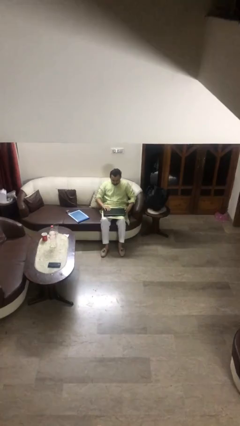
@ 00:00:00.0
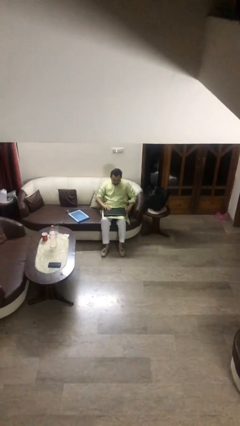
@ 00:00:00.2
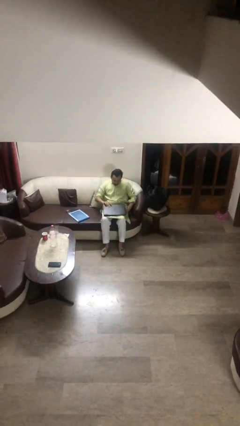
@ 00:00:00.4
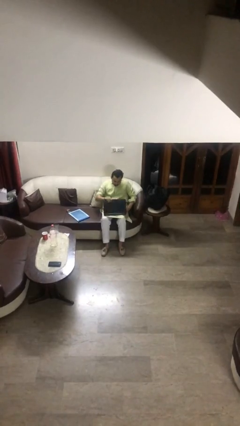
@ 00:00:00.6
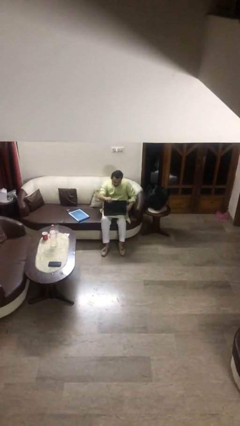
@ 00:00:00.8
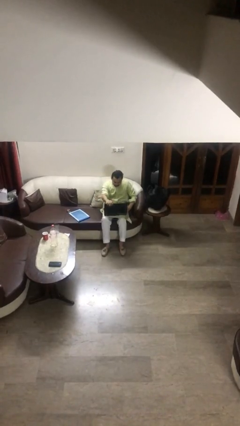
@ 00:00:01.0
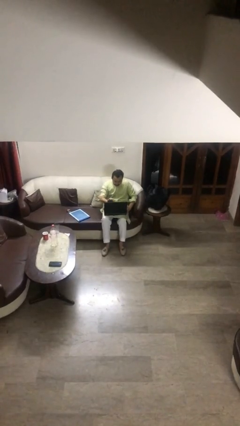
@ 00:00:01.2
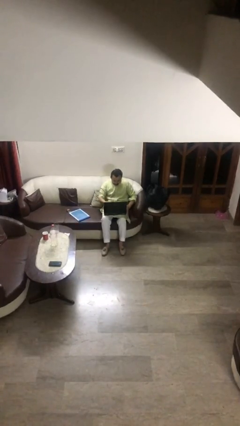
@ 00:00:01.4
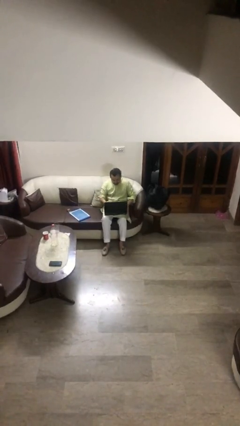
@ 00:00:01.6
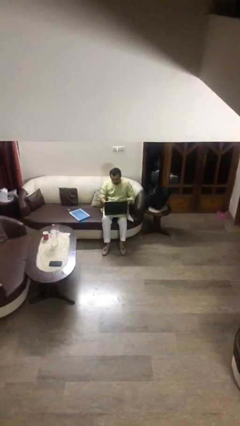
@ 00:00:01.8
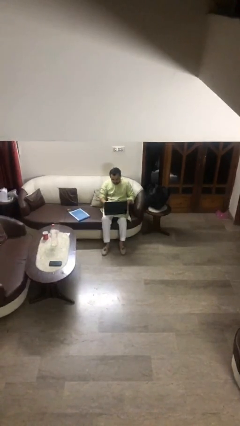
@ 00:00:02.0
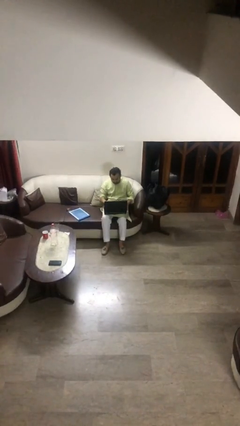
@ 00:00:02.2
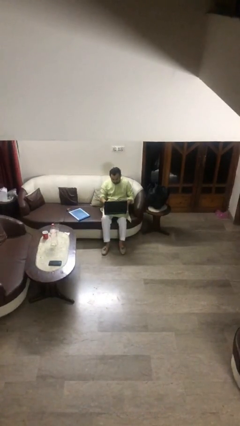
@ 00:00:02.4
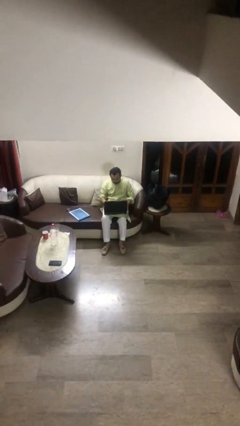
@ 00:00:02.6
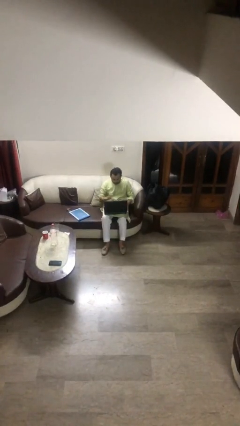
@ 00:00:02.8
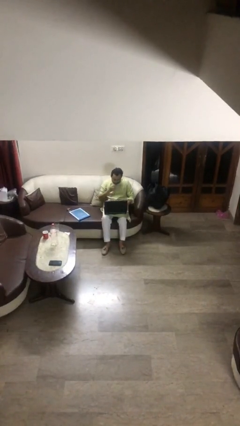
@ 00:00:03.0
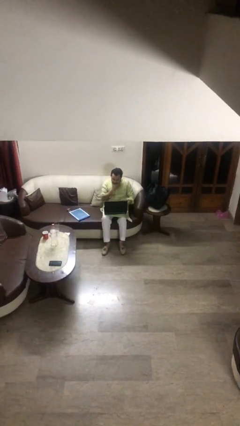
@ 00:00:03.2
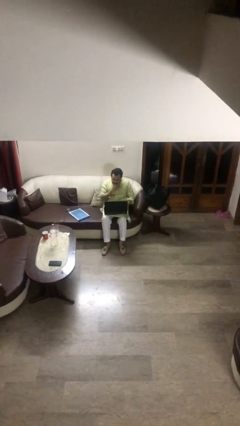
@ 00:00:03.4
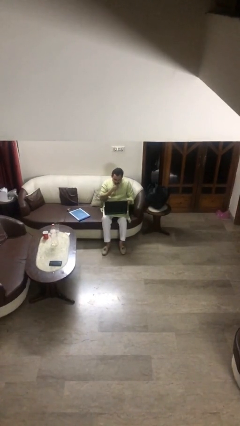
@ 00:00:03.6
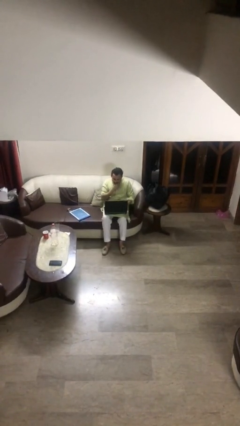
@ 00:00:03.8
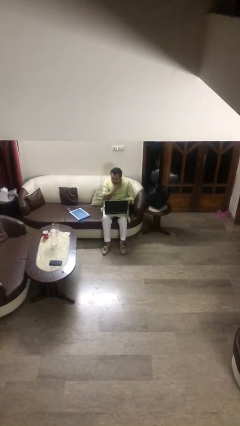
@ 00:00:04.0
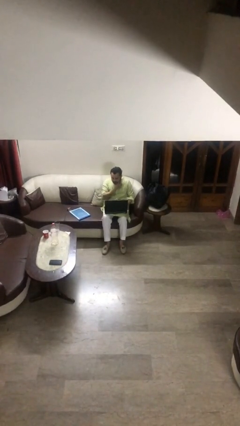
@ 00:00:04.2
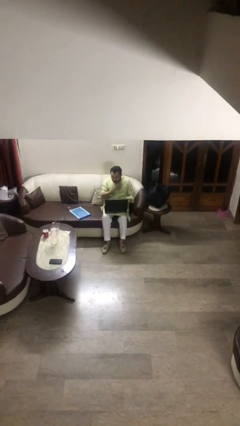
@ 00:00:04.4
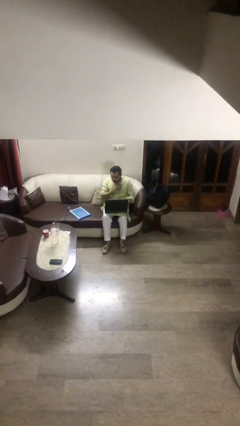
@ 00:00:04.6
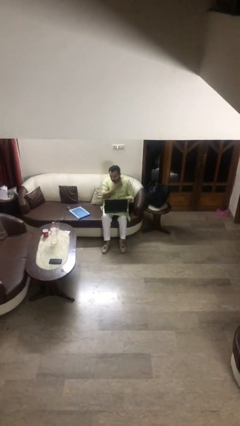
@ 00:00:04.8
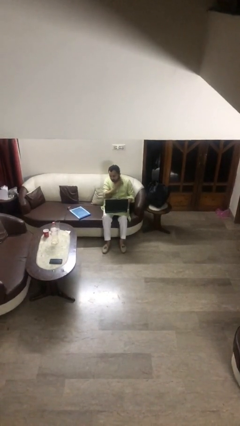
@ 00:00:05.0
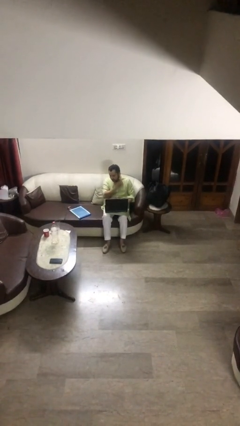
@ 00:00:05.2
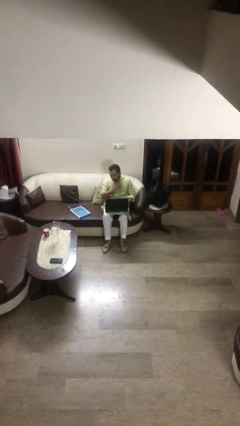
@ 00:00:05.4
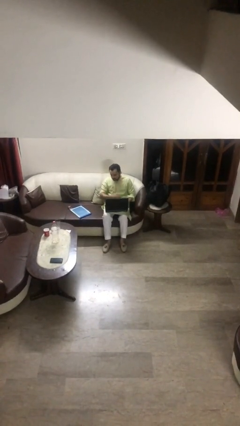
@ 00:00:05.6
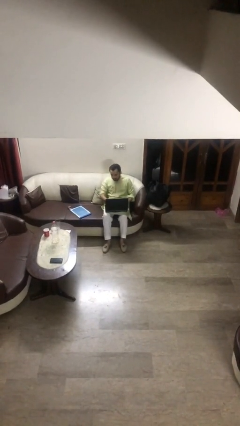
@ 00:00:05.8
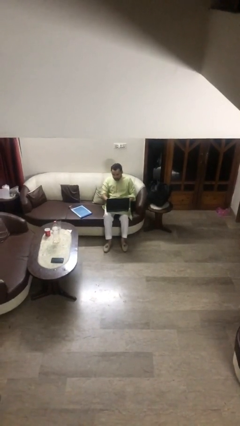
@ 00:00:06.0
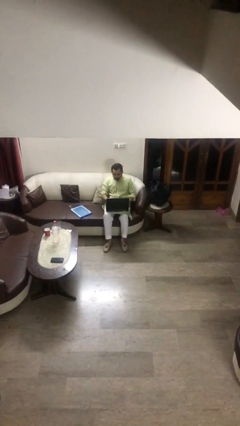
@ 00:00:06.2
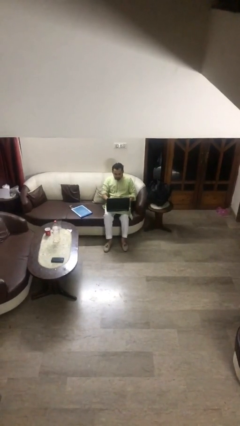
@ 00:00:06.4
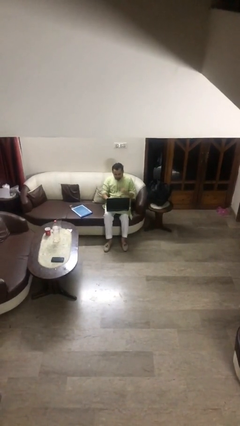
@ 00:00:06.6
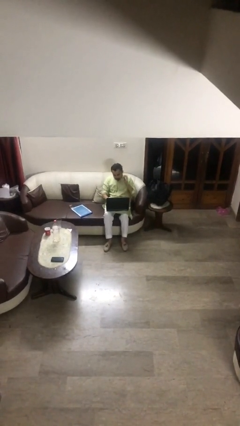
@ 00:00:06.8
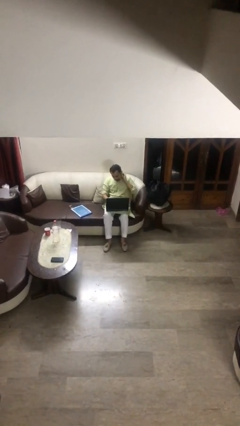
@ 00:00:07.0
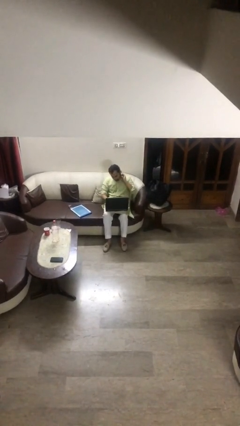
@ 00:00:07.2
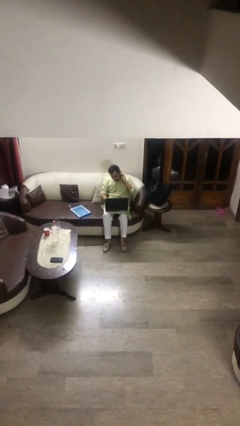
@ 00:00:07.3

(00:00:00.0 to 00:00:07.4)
person interacts with laptop

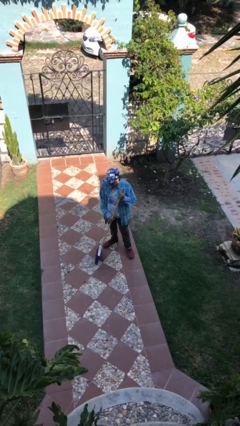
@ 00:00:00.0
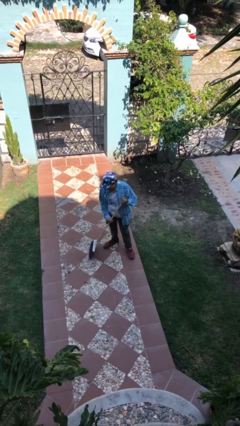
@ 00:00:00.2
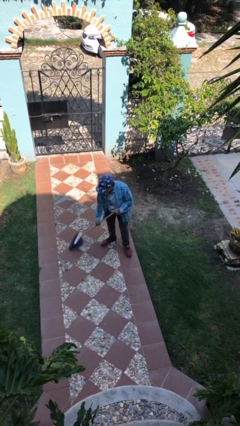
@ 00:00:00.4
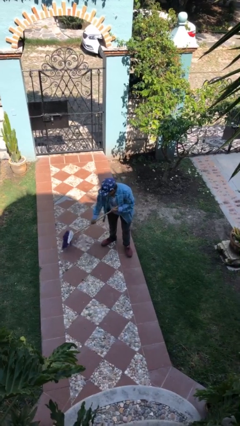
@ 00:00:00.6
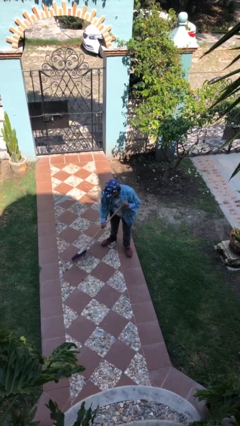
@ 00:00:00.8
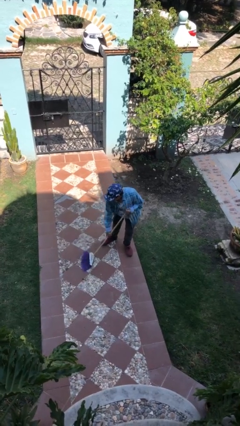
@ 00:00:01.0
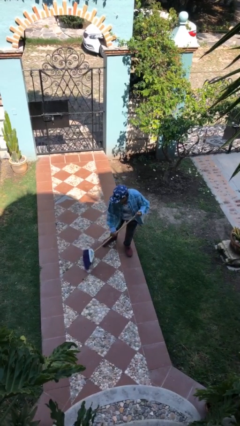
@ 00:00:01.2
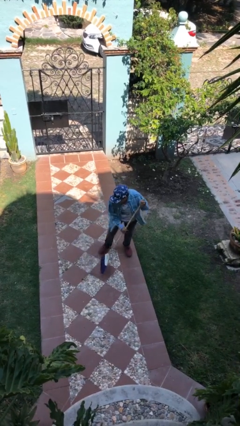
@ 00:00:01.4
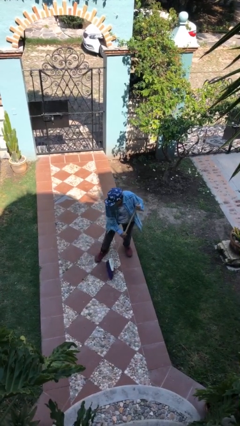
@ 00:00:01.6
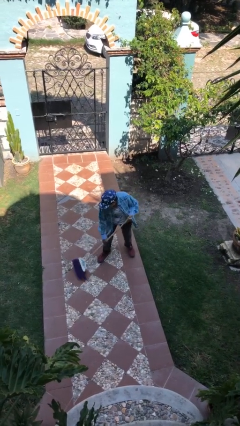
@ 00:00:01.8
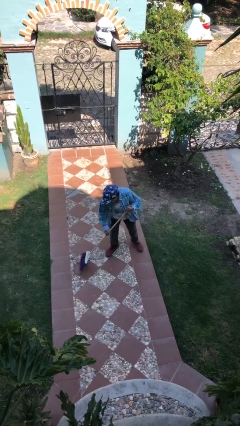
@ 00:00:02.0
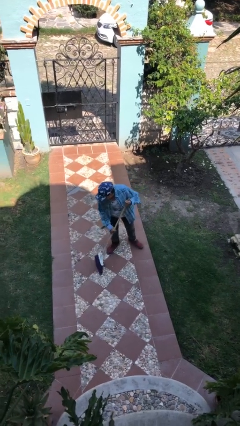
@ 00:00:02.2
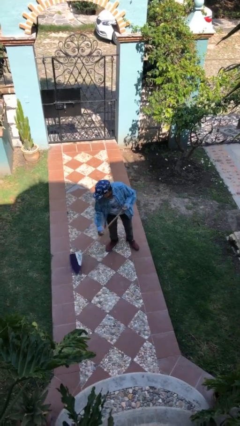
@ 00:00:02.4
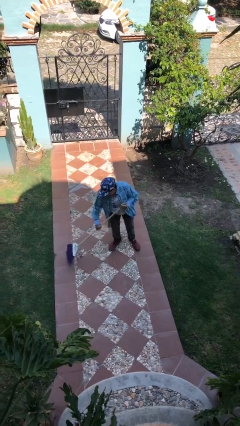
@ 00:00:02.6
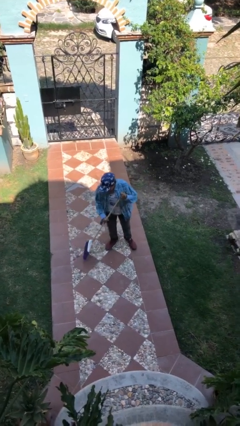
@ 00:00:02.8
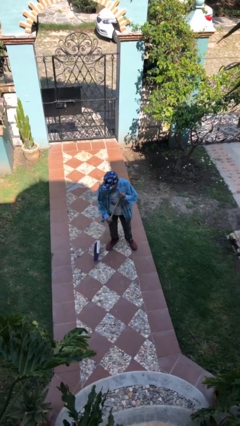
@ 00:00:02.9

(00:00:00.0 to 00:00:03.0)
person sweeps floor

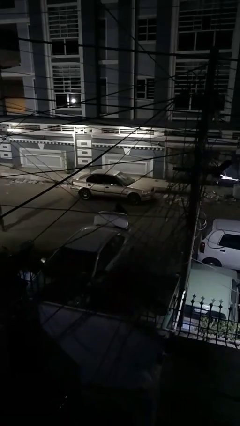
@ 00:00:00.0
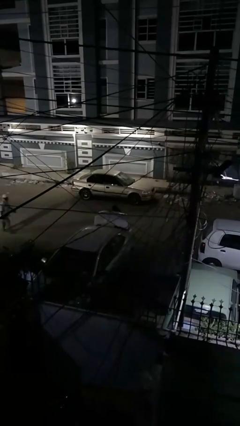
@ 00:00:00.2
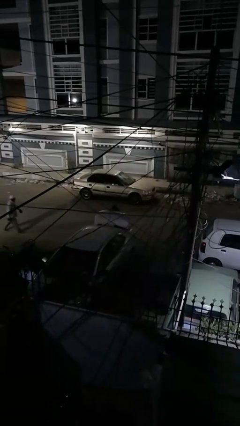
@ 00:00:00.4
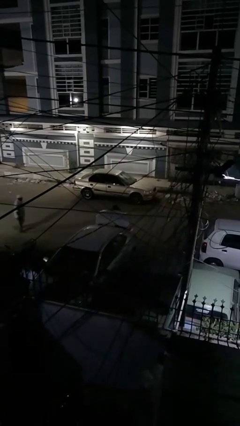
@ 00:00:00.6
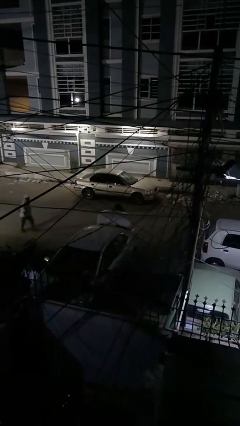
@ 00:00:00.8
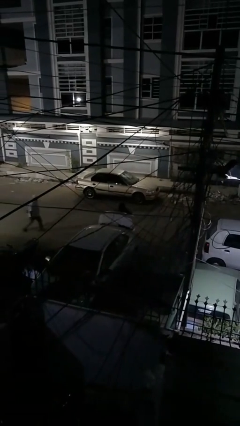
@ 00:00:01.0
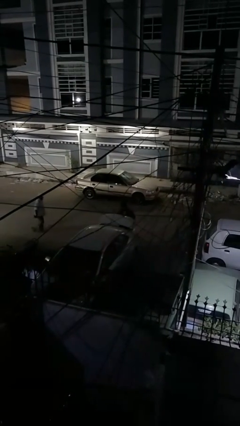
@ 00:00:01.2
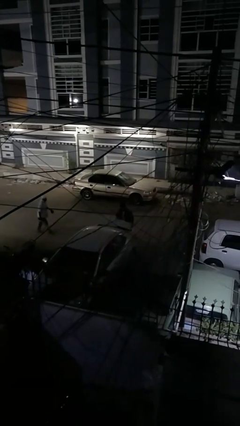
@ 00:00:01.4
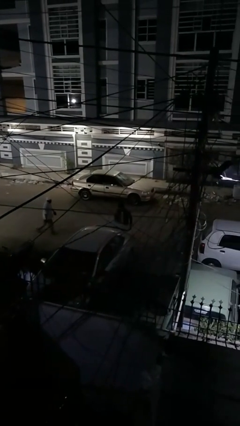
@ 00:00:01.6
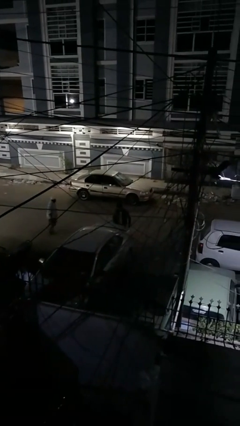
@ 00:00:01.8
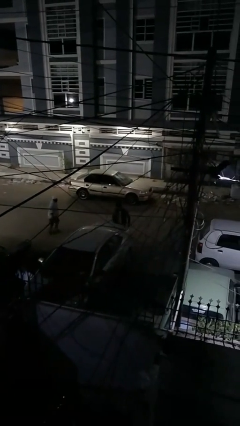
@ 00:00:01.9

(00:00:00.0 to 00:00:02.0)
person loads car

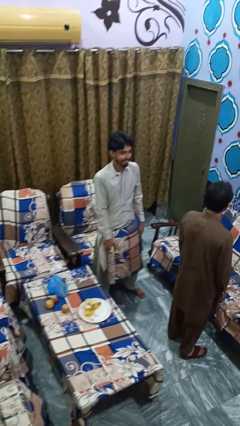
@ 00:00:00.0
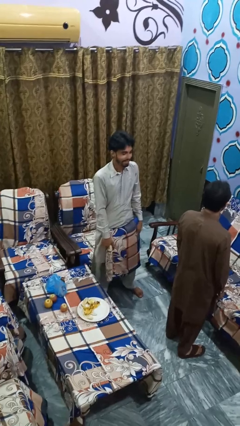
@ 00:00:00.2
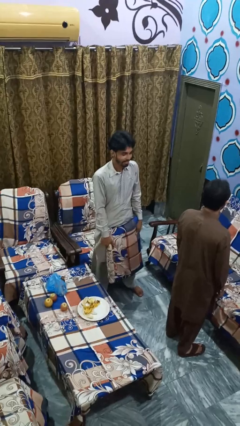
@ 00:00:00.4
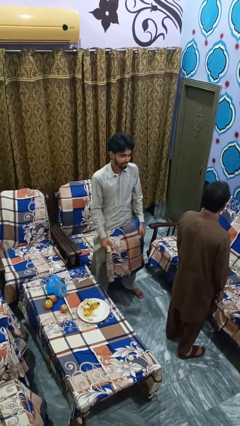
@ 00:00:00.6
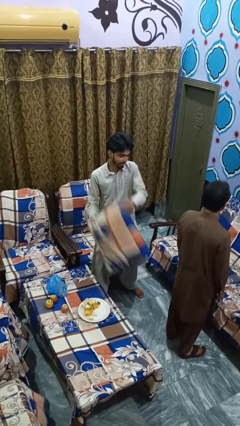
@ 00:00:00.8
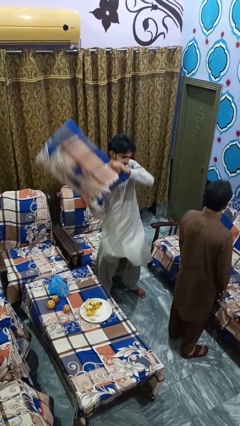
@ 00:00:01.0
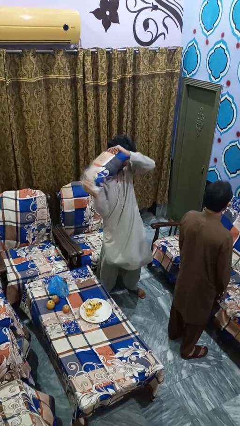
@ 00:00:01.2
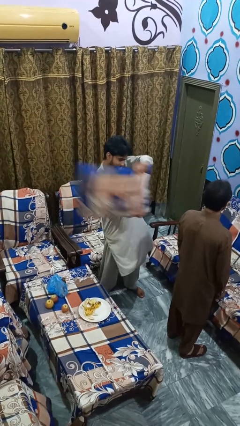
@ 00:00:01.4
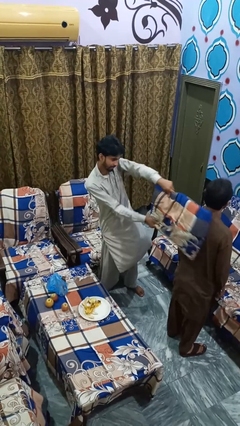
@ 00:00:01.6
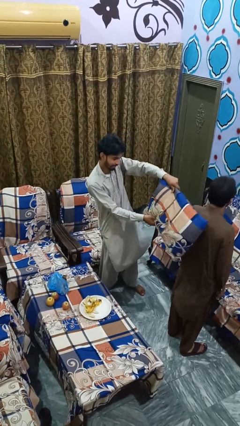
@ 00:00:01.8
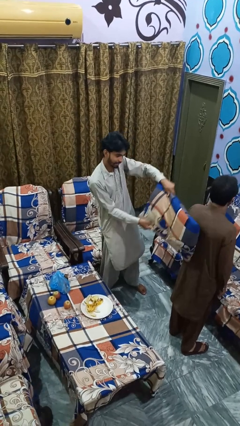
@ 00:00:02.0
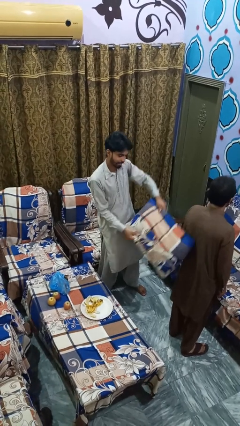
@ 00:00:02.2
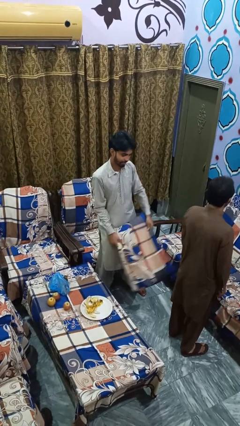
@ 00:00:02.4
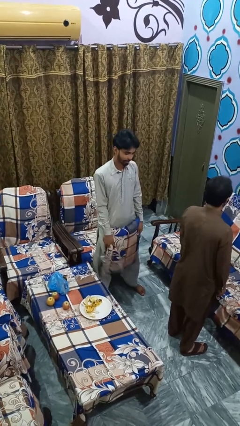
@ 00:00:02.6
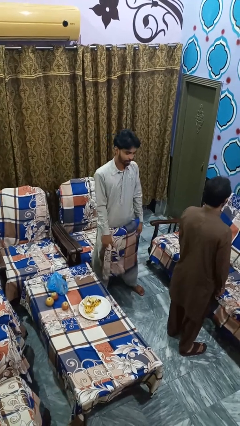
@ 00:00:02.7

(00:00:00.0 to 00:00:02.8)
person hits person with pillow

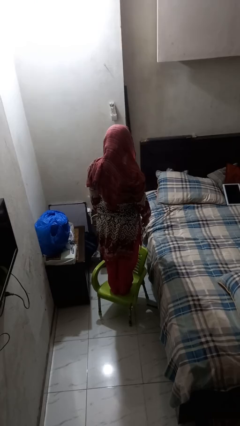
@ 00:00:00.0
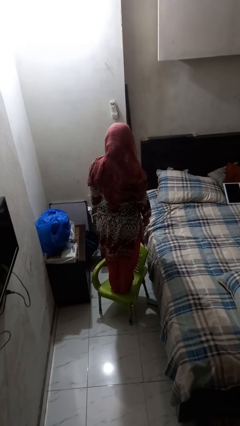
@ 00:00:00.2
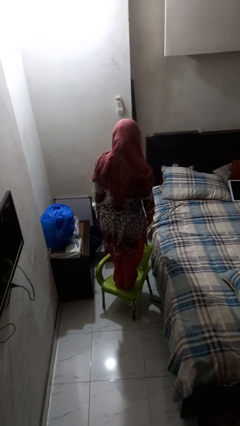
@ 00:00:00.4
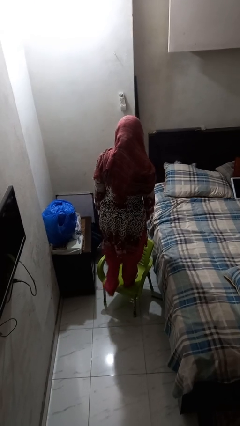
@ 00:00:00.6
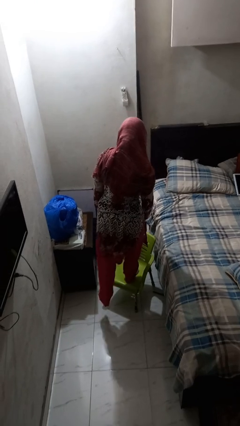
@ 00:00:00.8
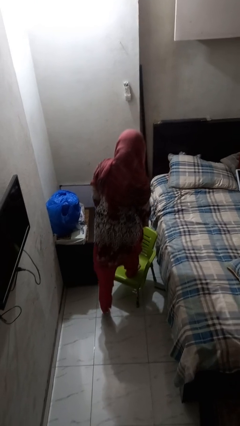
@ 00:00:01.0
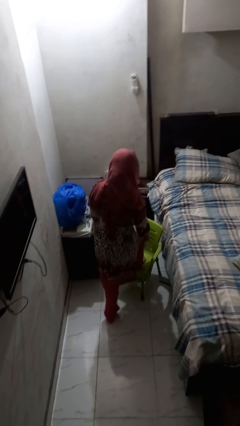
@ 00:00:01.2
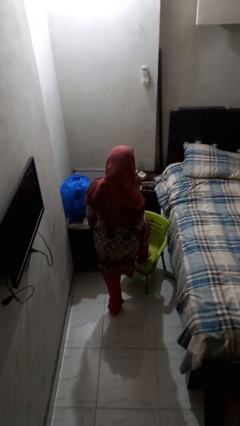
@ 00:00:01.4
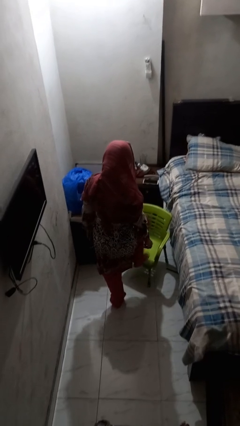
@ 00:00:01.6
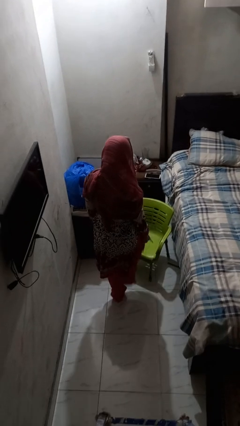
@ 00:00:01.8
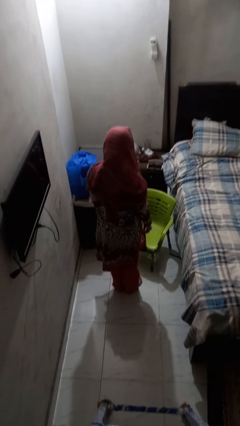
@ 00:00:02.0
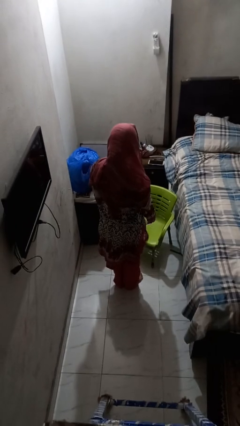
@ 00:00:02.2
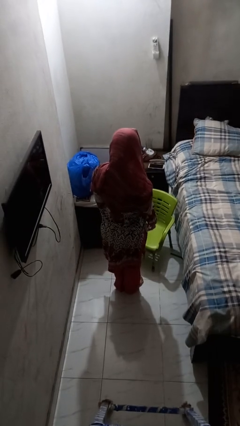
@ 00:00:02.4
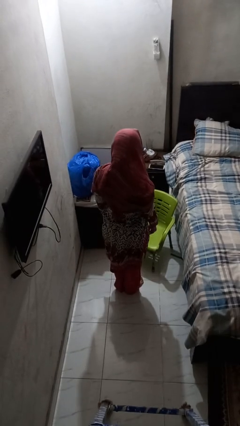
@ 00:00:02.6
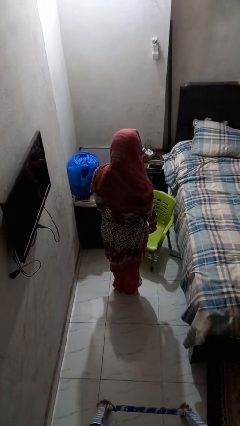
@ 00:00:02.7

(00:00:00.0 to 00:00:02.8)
person climbs off chair
